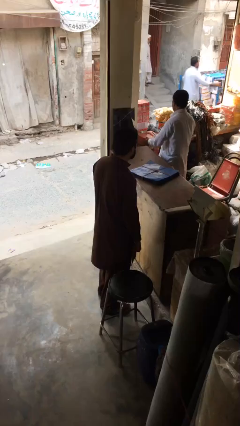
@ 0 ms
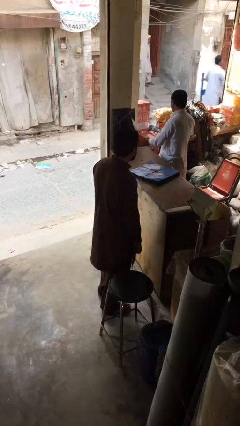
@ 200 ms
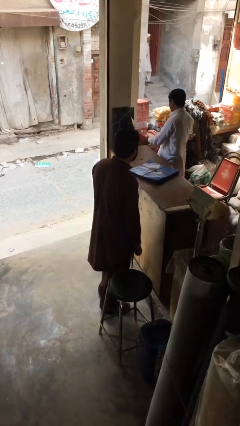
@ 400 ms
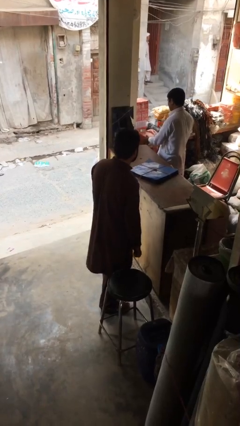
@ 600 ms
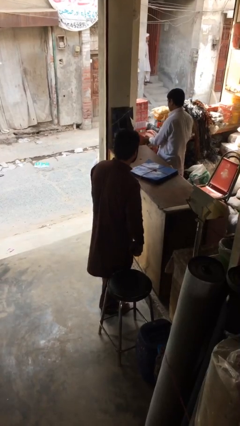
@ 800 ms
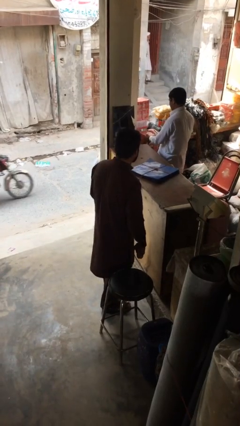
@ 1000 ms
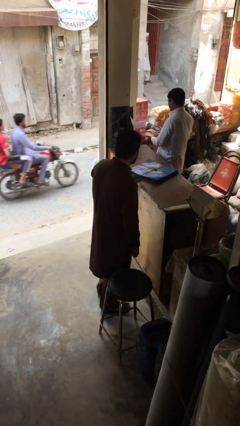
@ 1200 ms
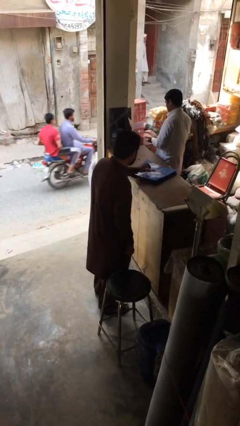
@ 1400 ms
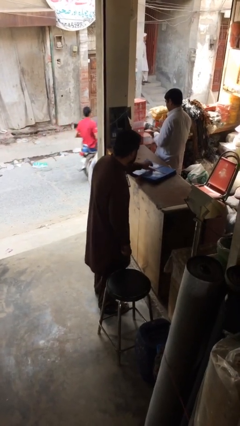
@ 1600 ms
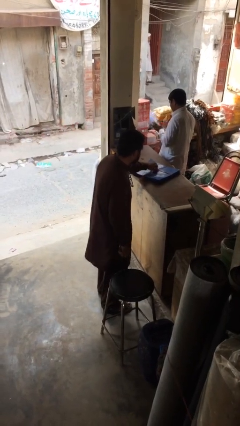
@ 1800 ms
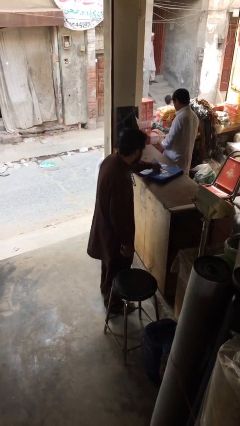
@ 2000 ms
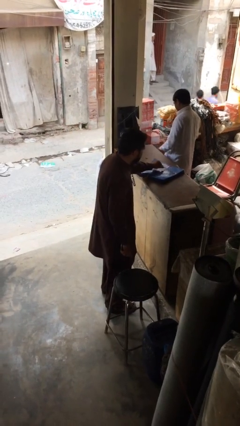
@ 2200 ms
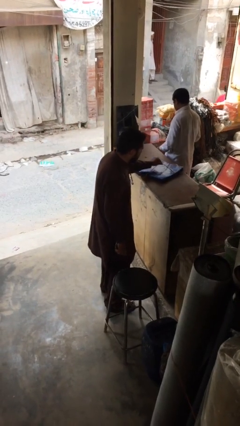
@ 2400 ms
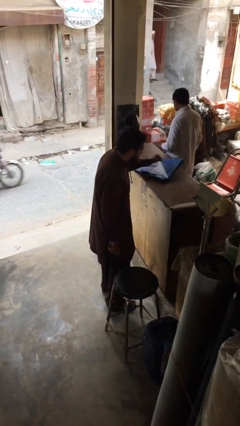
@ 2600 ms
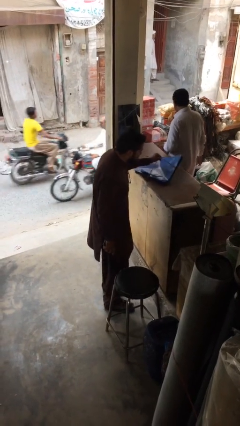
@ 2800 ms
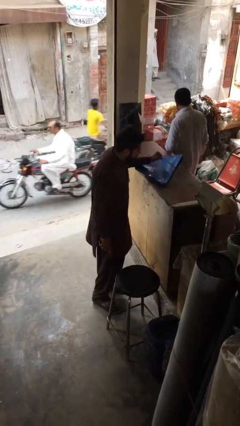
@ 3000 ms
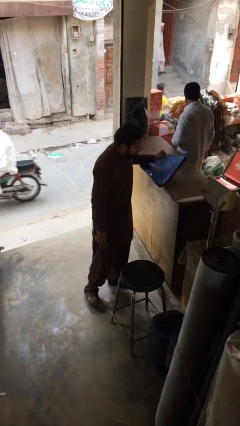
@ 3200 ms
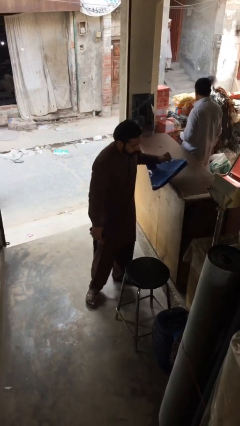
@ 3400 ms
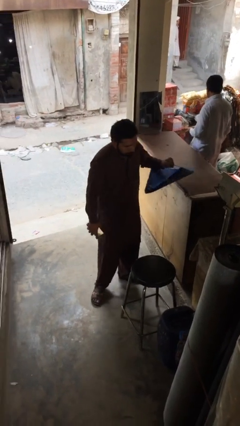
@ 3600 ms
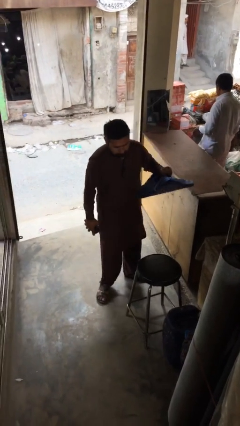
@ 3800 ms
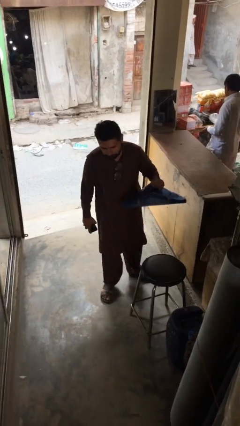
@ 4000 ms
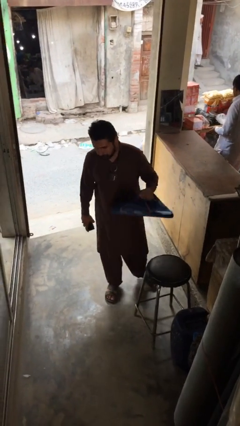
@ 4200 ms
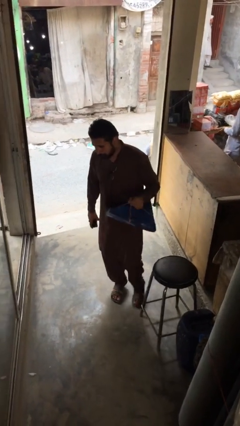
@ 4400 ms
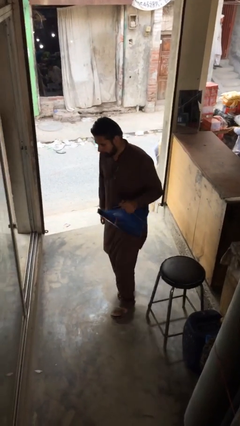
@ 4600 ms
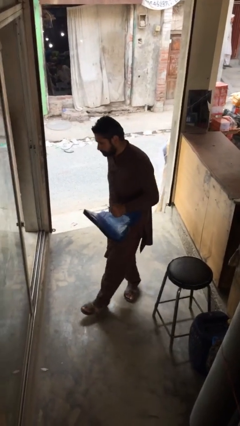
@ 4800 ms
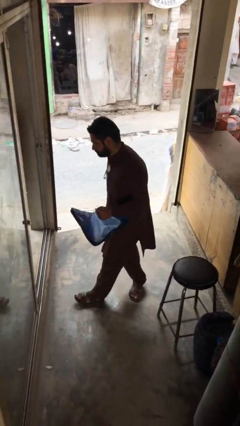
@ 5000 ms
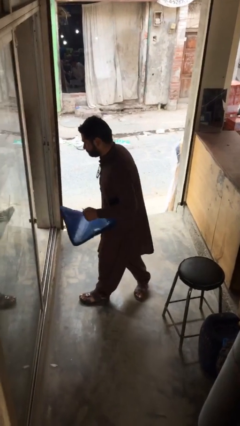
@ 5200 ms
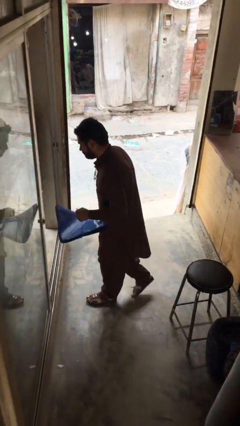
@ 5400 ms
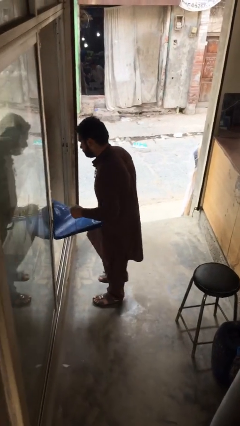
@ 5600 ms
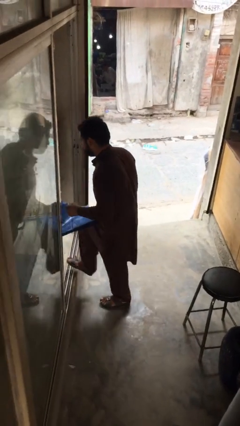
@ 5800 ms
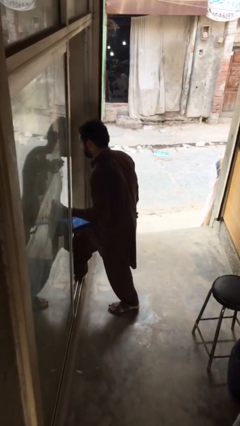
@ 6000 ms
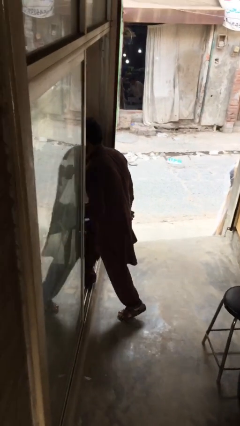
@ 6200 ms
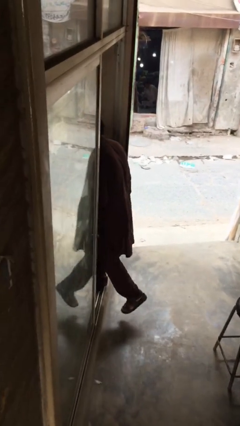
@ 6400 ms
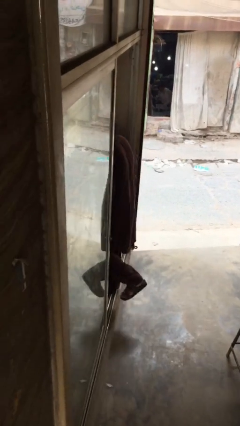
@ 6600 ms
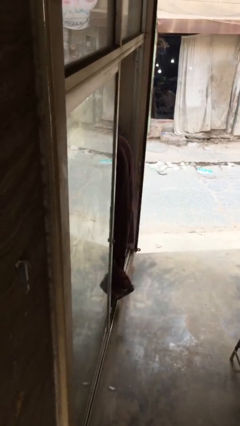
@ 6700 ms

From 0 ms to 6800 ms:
person steals object from person

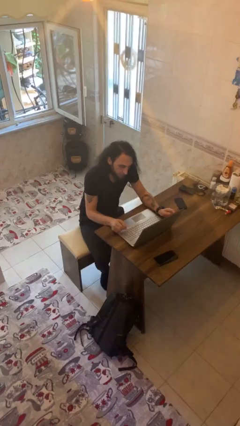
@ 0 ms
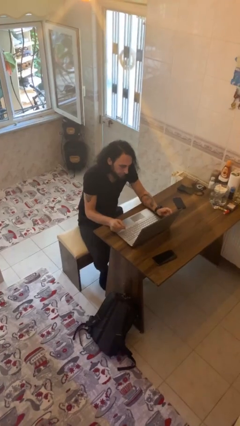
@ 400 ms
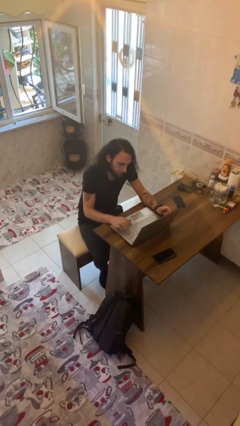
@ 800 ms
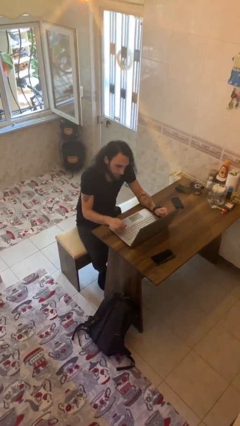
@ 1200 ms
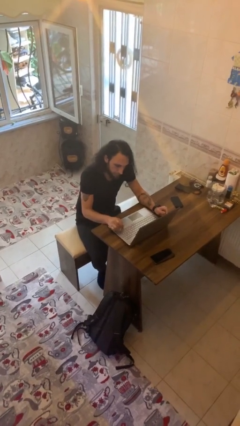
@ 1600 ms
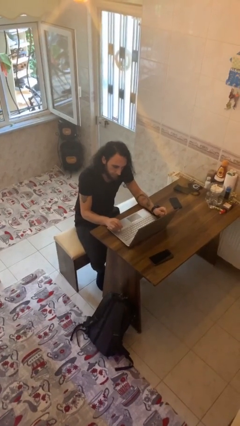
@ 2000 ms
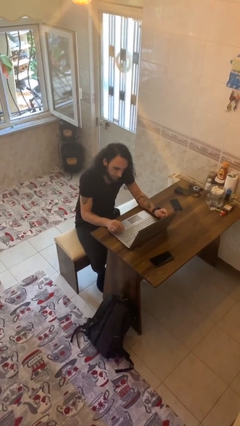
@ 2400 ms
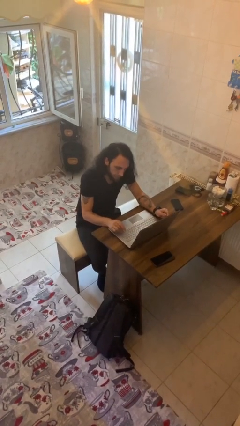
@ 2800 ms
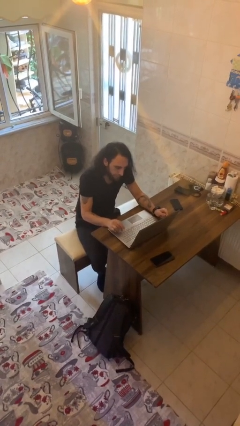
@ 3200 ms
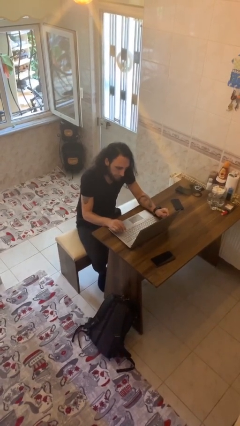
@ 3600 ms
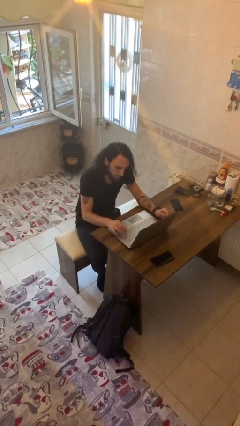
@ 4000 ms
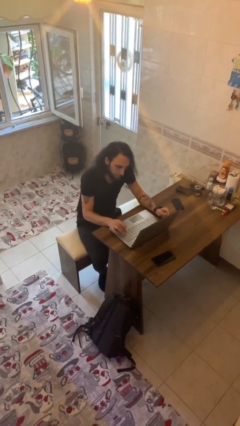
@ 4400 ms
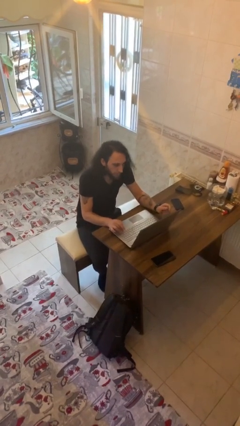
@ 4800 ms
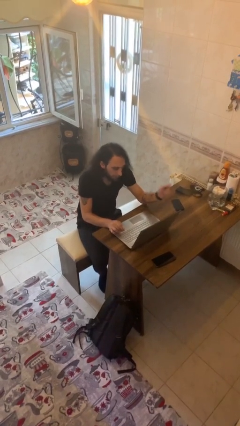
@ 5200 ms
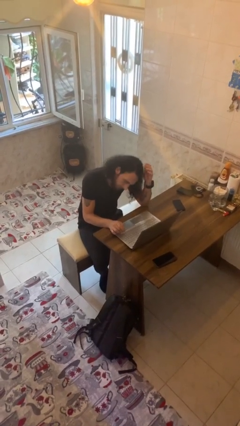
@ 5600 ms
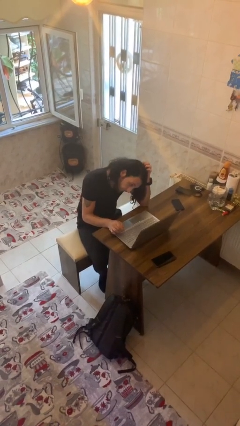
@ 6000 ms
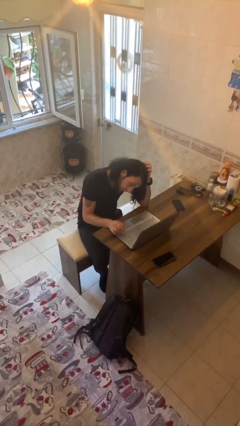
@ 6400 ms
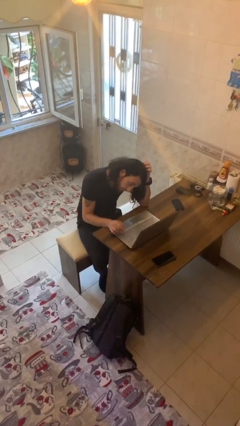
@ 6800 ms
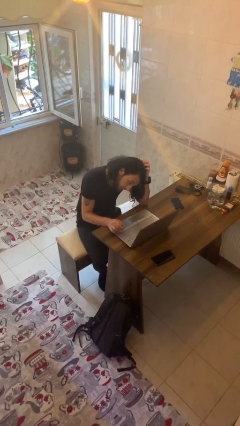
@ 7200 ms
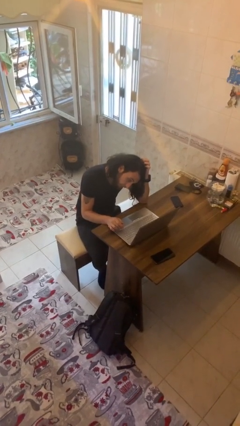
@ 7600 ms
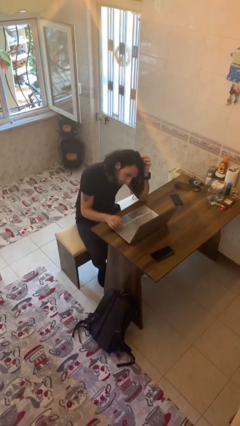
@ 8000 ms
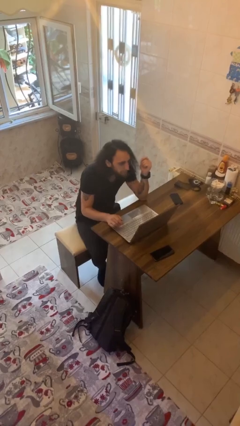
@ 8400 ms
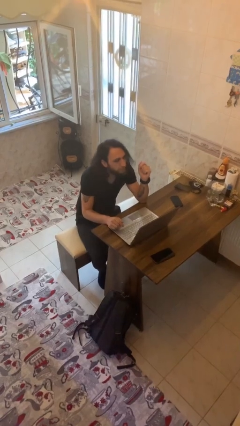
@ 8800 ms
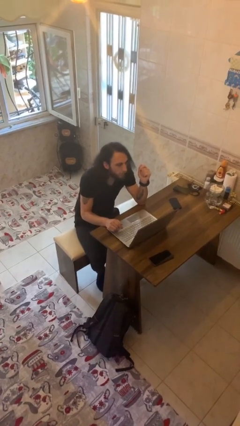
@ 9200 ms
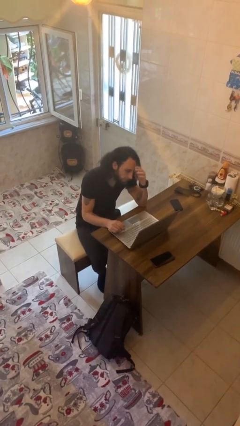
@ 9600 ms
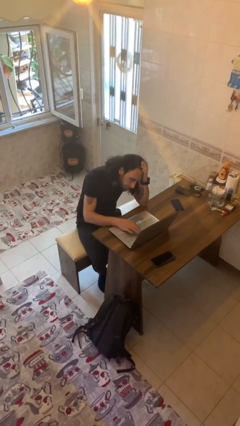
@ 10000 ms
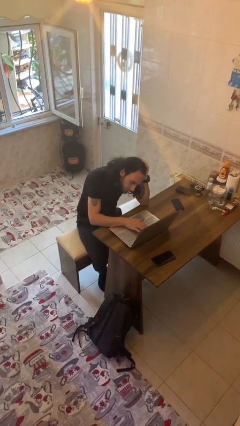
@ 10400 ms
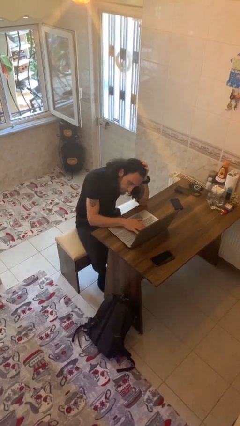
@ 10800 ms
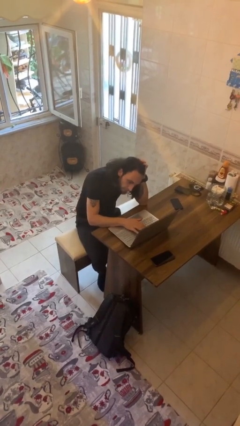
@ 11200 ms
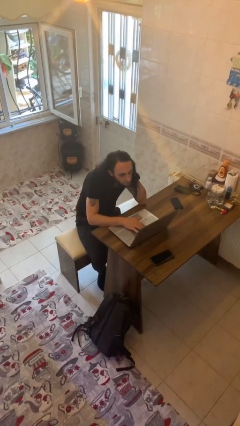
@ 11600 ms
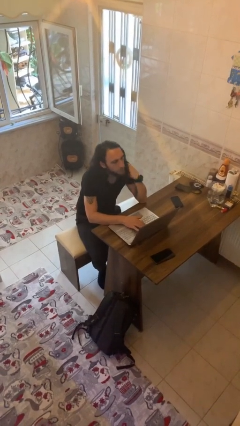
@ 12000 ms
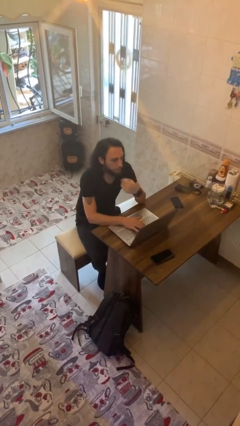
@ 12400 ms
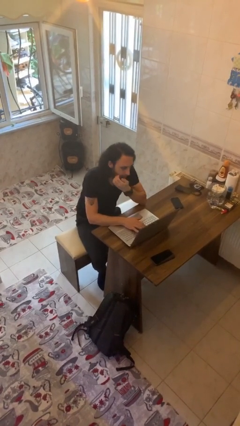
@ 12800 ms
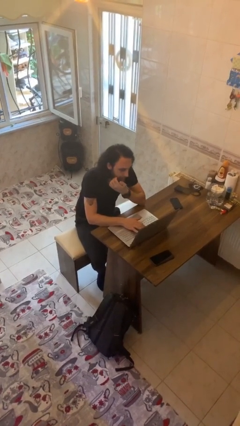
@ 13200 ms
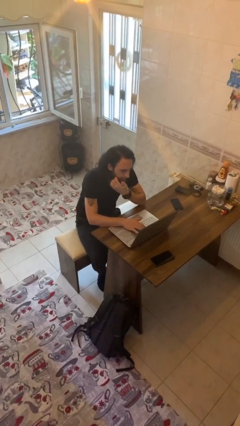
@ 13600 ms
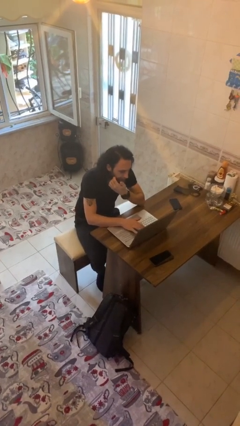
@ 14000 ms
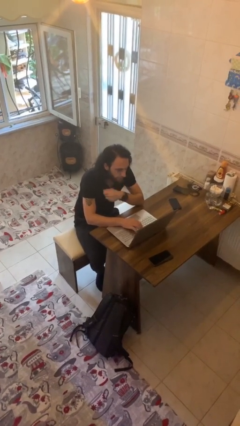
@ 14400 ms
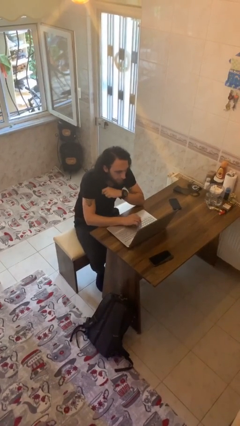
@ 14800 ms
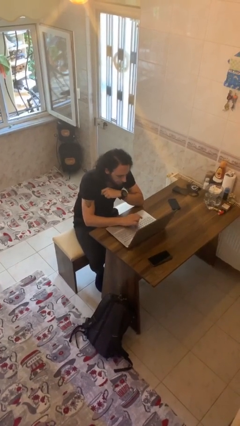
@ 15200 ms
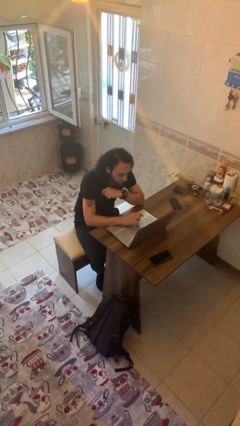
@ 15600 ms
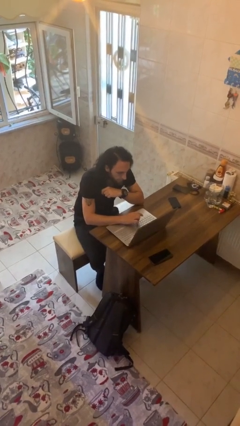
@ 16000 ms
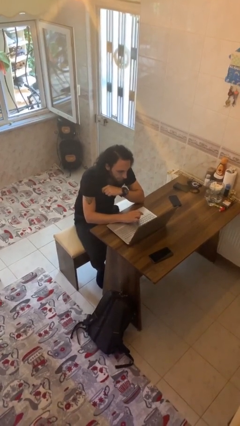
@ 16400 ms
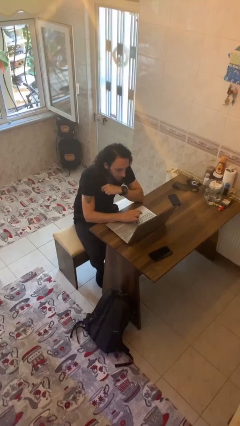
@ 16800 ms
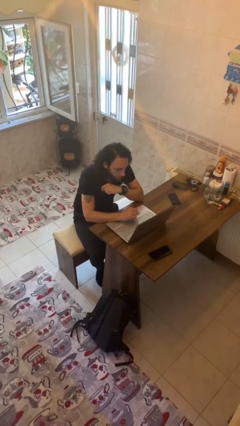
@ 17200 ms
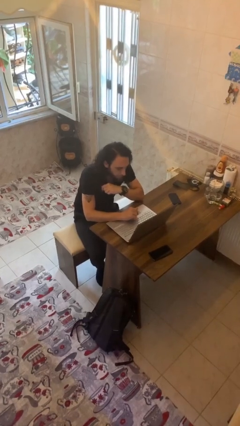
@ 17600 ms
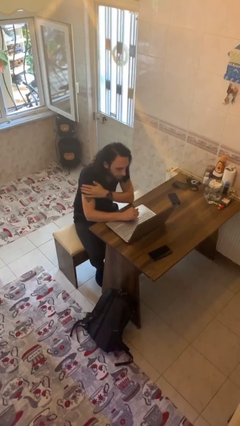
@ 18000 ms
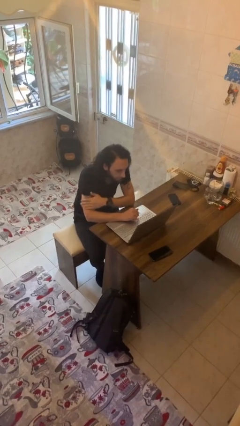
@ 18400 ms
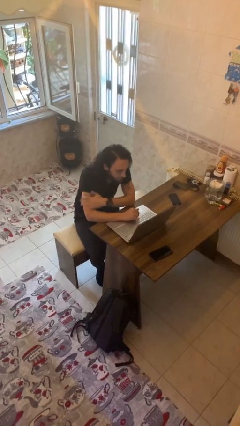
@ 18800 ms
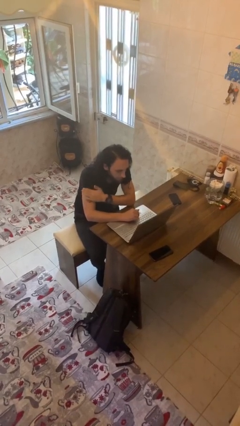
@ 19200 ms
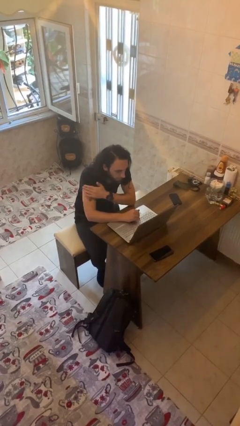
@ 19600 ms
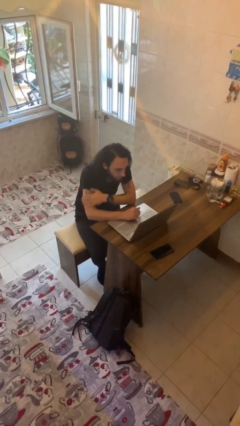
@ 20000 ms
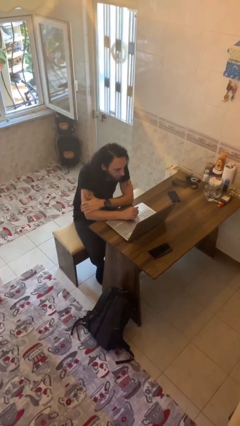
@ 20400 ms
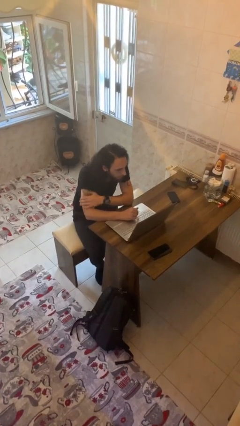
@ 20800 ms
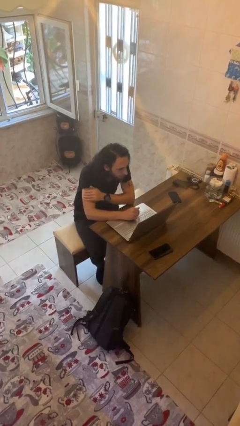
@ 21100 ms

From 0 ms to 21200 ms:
person interacts with laptop

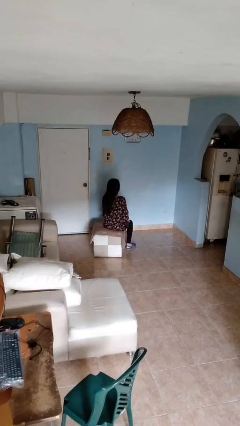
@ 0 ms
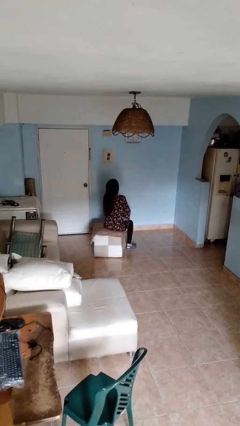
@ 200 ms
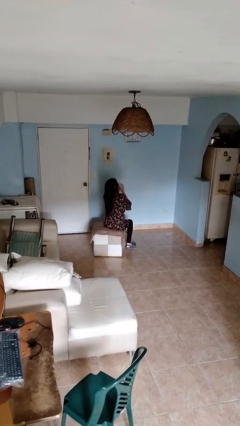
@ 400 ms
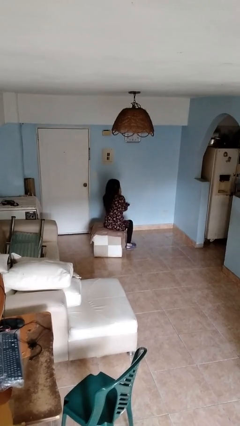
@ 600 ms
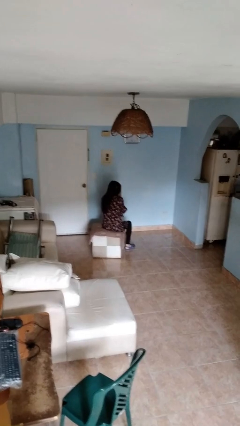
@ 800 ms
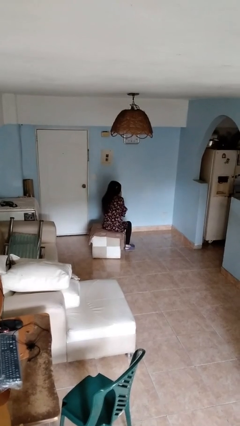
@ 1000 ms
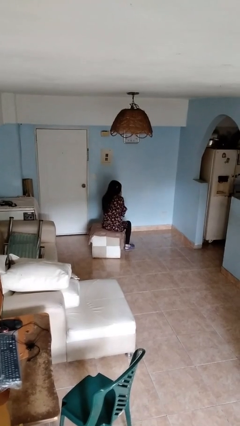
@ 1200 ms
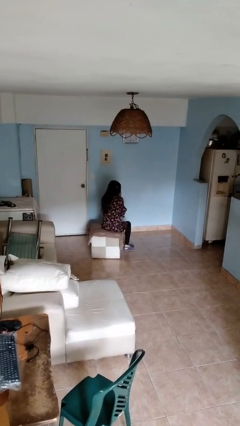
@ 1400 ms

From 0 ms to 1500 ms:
person sneezes into hand
